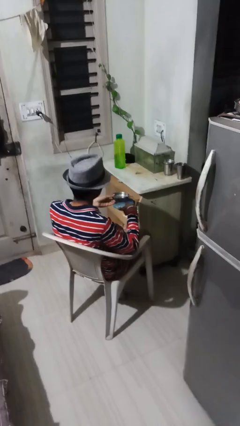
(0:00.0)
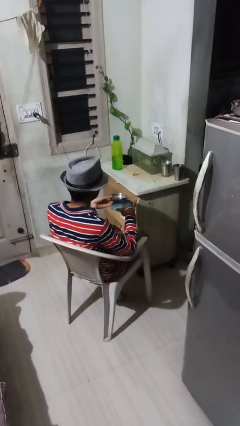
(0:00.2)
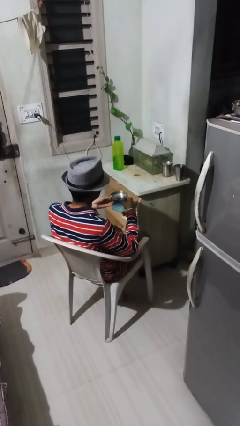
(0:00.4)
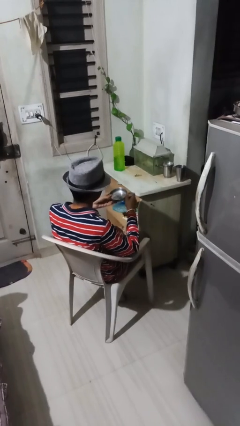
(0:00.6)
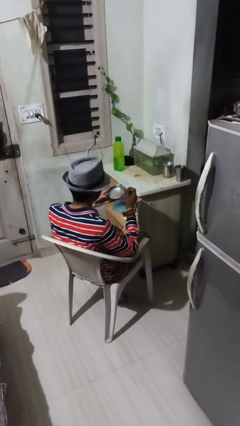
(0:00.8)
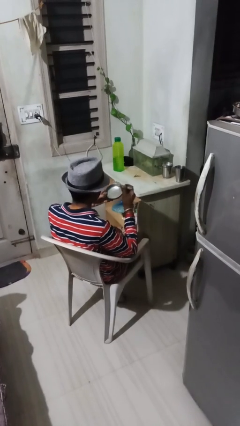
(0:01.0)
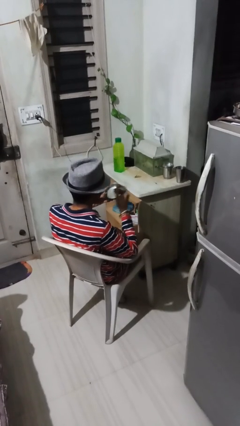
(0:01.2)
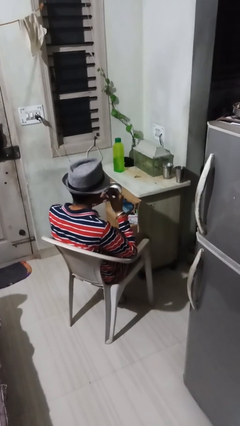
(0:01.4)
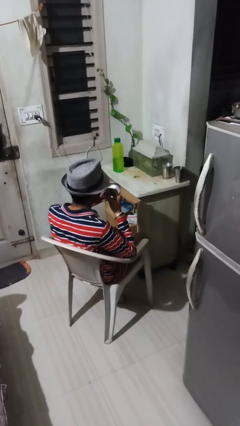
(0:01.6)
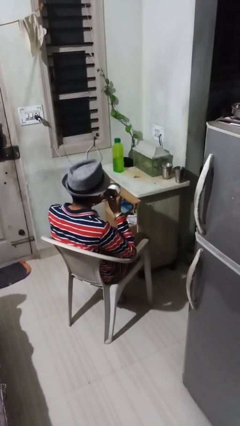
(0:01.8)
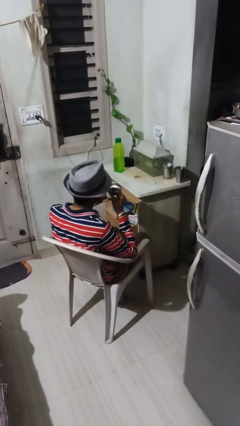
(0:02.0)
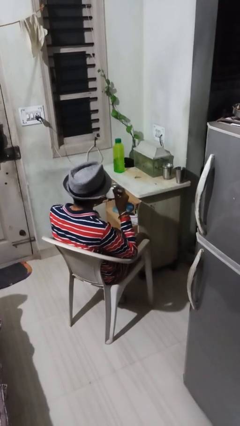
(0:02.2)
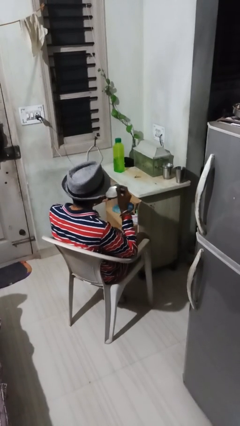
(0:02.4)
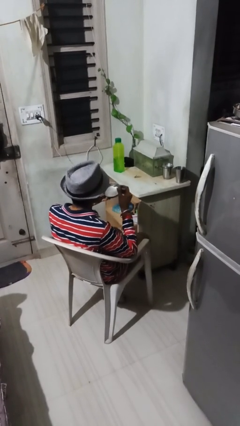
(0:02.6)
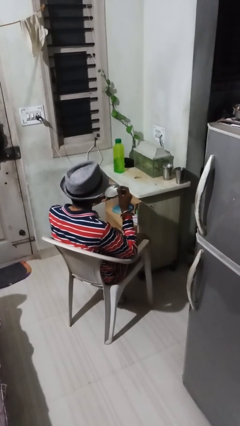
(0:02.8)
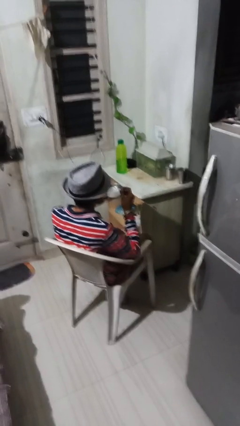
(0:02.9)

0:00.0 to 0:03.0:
person eats with utensil

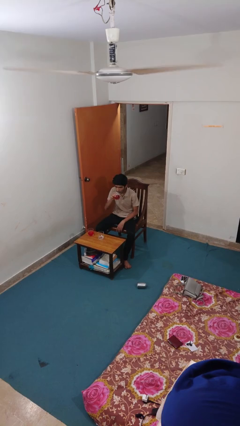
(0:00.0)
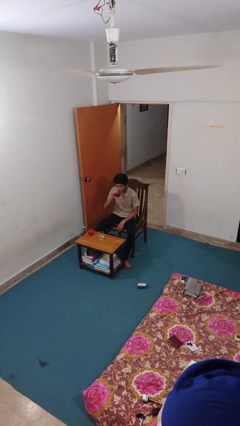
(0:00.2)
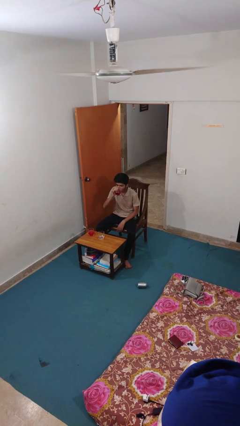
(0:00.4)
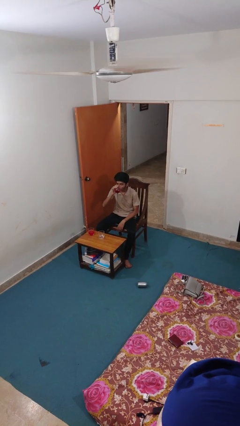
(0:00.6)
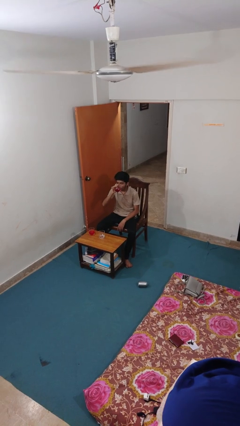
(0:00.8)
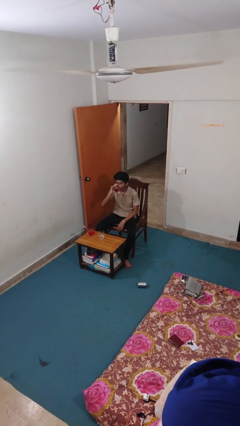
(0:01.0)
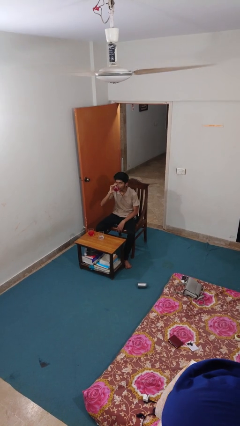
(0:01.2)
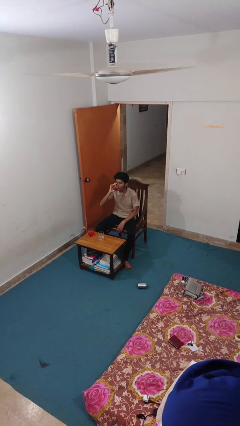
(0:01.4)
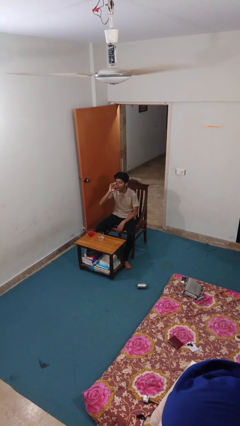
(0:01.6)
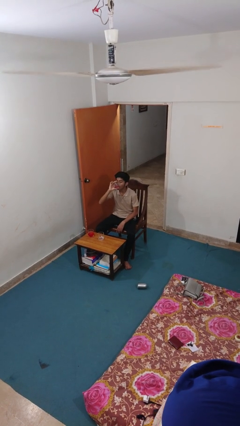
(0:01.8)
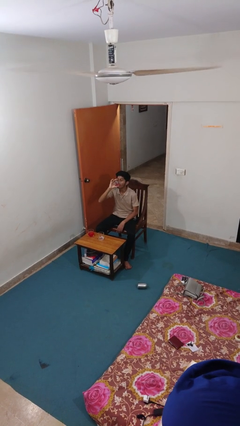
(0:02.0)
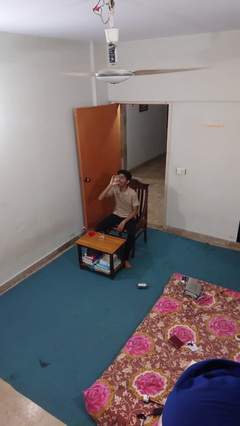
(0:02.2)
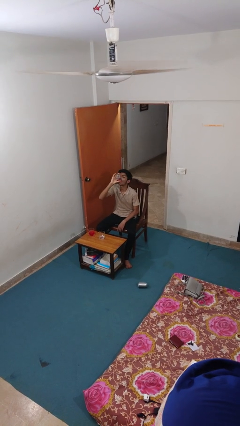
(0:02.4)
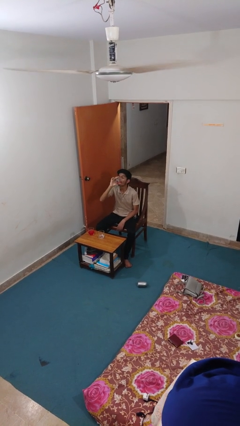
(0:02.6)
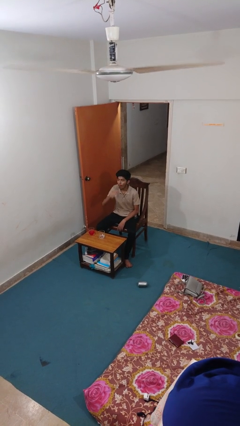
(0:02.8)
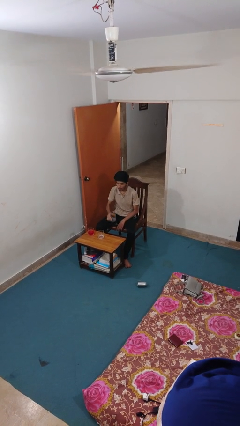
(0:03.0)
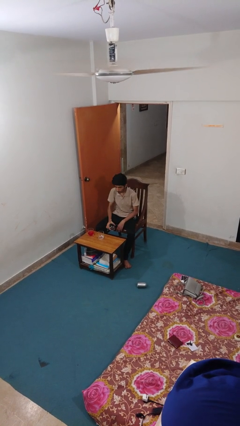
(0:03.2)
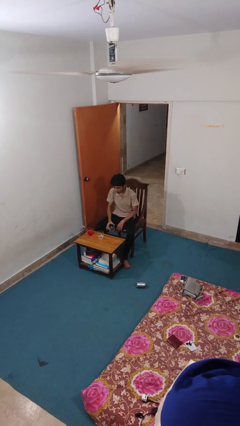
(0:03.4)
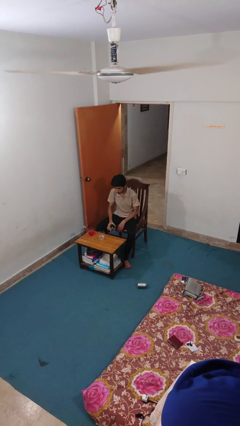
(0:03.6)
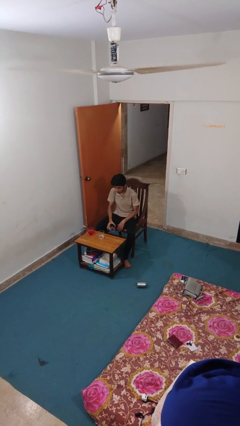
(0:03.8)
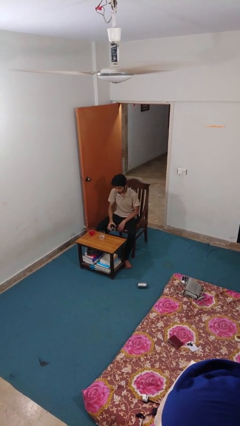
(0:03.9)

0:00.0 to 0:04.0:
person drinks from shotglass

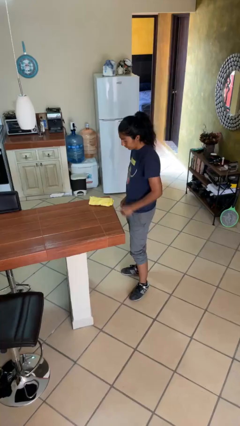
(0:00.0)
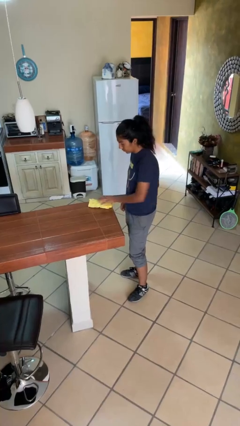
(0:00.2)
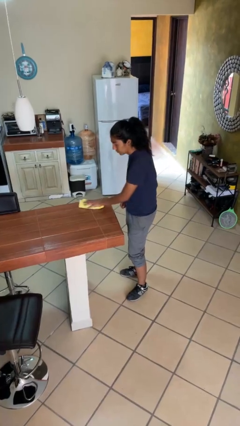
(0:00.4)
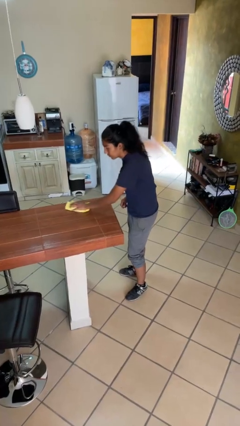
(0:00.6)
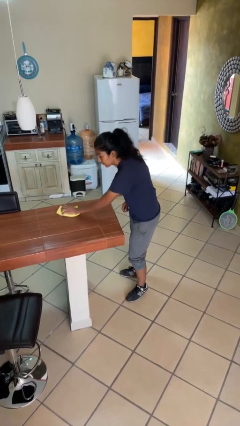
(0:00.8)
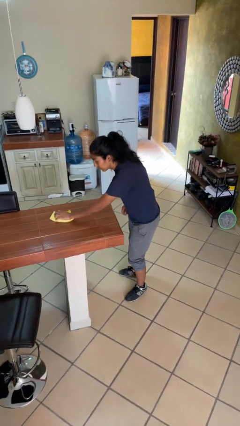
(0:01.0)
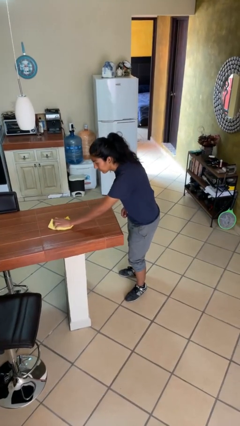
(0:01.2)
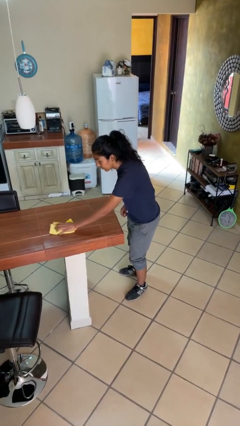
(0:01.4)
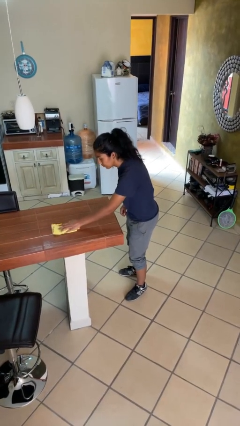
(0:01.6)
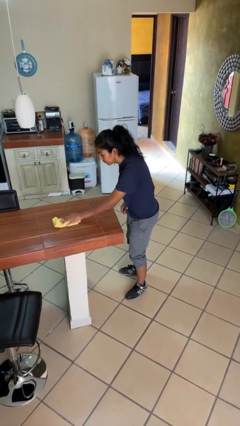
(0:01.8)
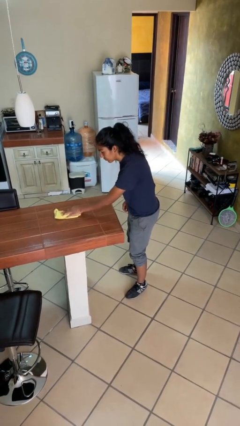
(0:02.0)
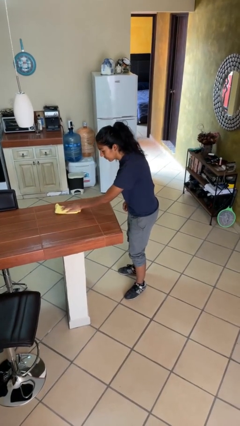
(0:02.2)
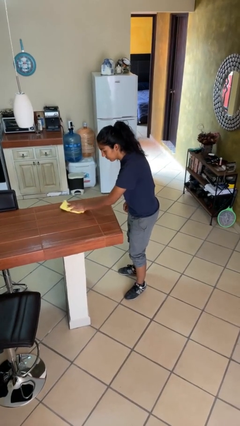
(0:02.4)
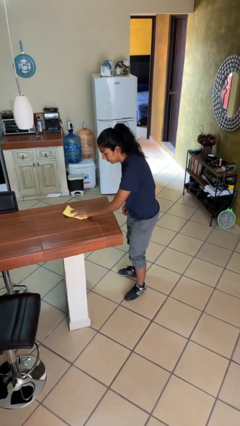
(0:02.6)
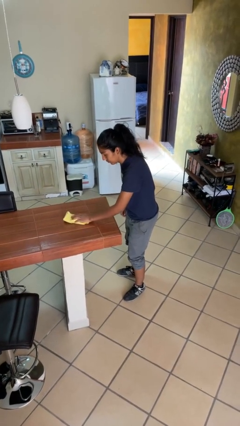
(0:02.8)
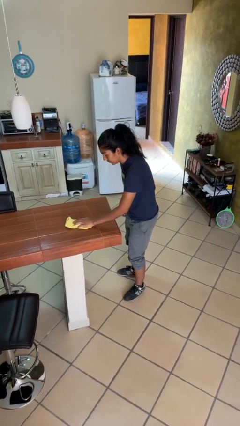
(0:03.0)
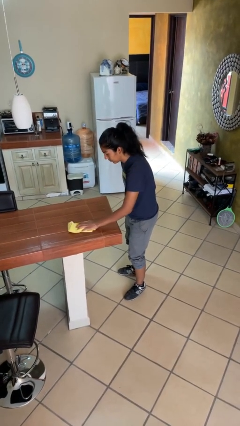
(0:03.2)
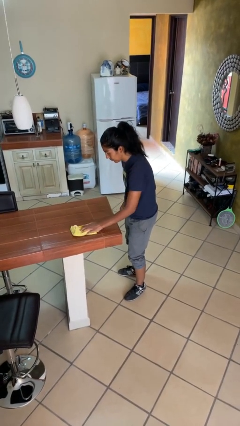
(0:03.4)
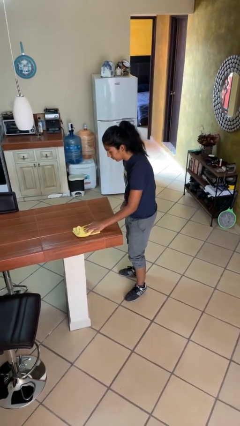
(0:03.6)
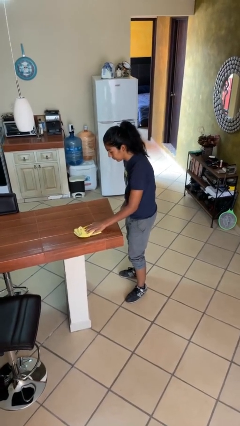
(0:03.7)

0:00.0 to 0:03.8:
person cleans table with rag

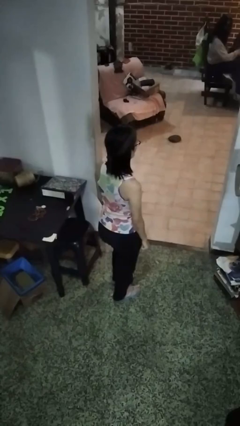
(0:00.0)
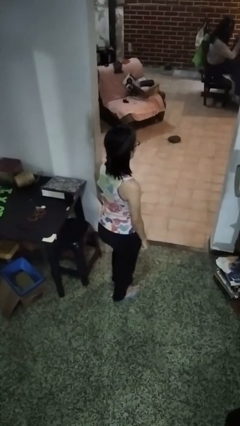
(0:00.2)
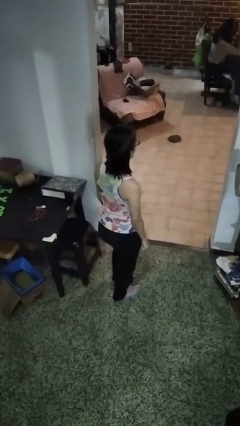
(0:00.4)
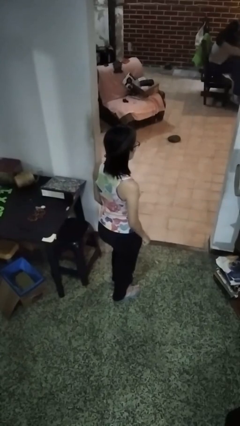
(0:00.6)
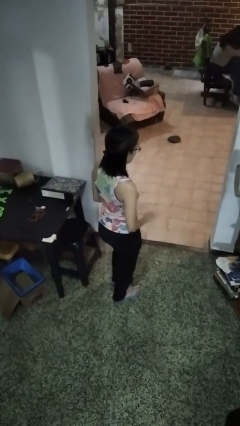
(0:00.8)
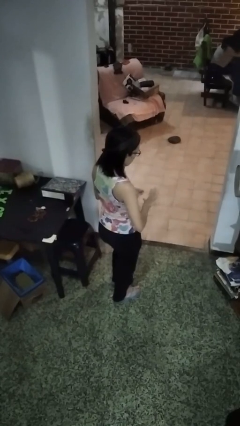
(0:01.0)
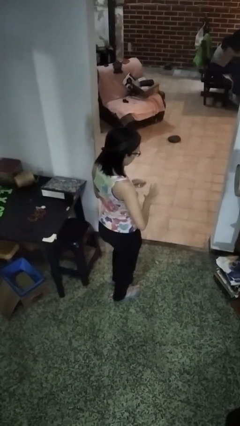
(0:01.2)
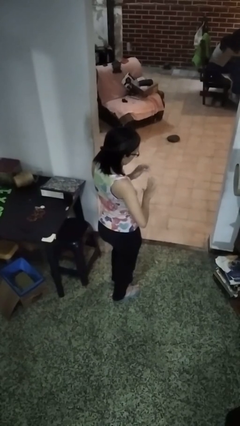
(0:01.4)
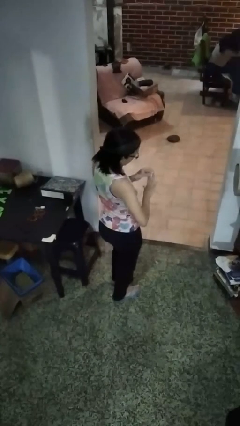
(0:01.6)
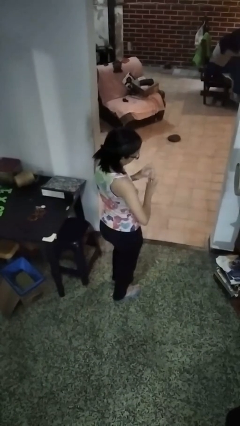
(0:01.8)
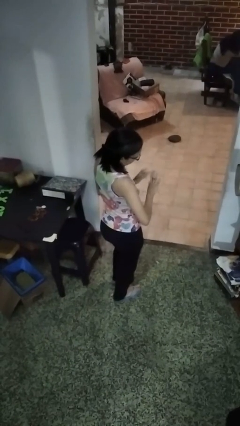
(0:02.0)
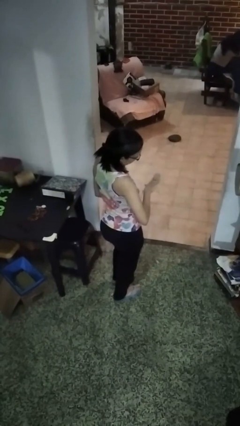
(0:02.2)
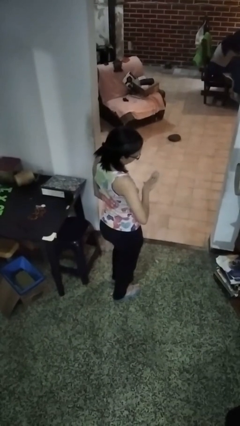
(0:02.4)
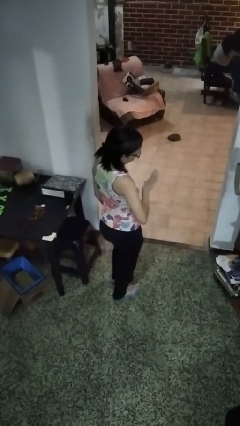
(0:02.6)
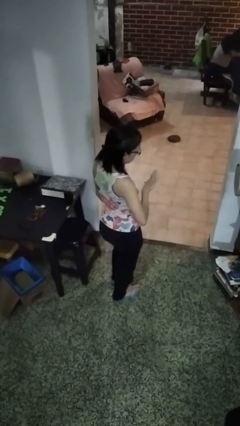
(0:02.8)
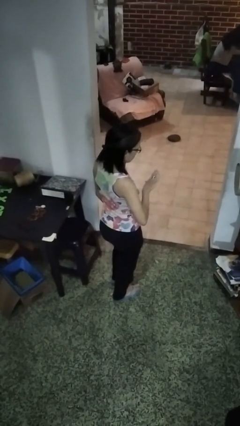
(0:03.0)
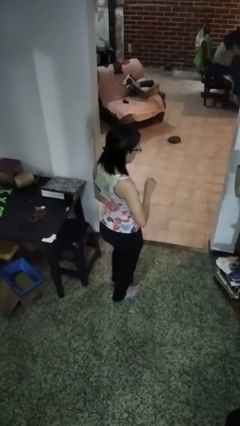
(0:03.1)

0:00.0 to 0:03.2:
person puts on ring

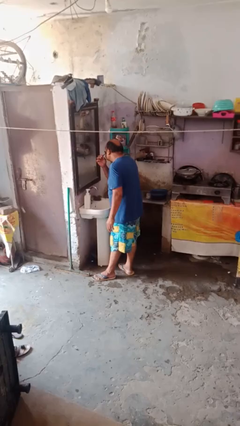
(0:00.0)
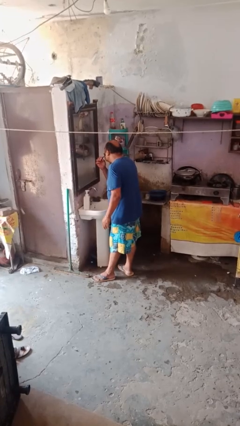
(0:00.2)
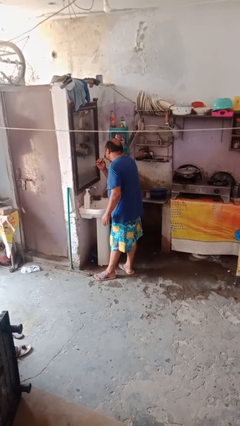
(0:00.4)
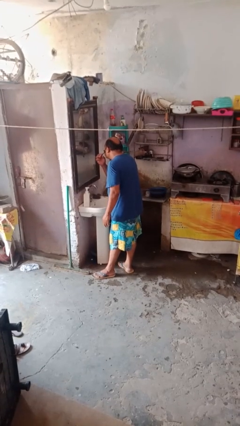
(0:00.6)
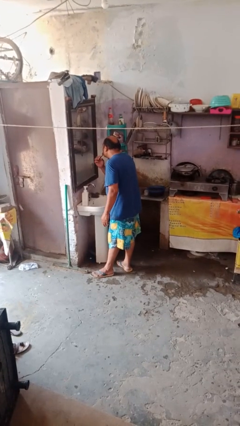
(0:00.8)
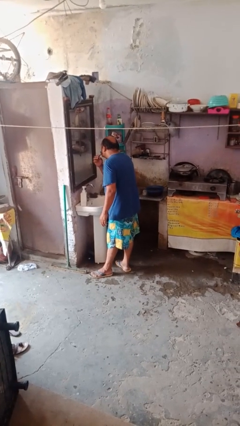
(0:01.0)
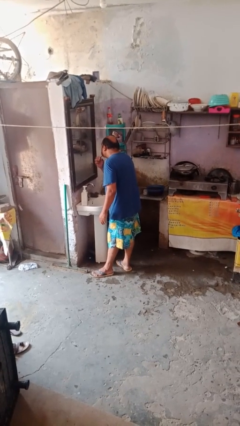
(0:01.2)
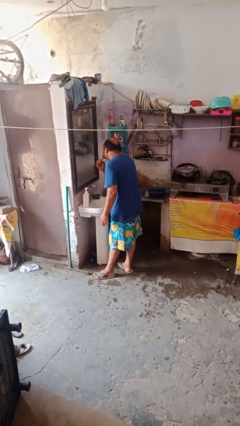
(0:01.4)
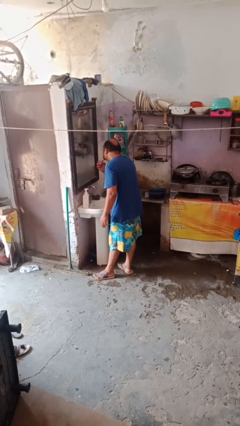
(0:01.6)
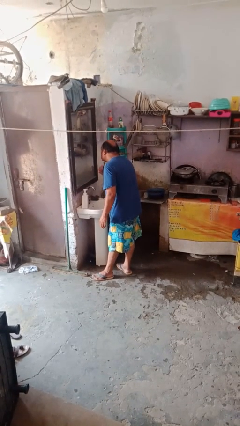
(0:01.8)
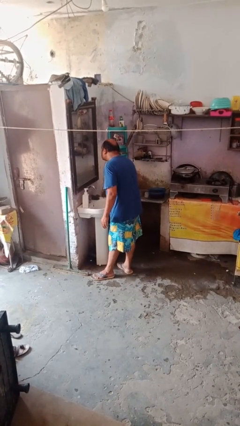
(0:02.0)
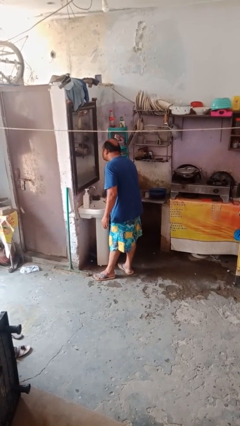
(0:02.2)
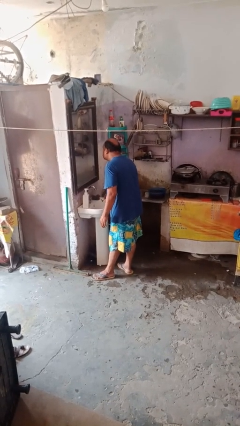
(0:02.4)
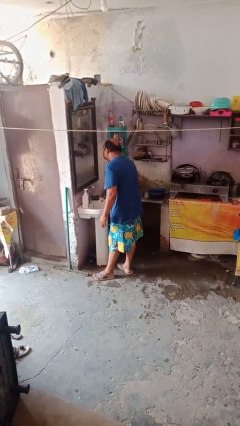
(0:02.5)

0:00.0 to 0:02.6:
person shaves face

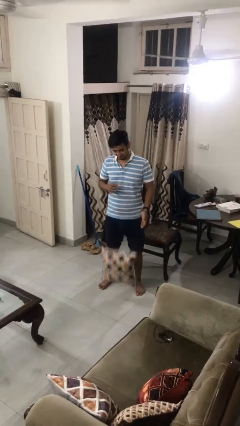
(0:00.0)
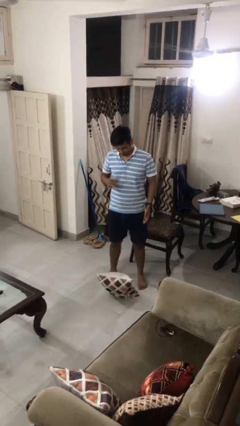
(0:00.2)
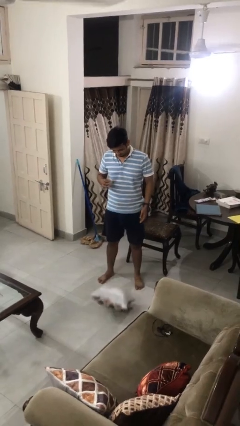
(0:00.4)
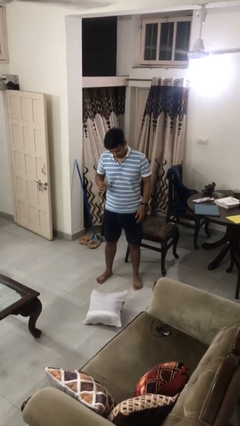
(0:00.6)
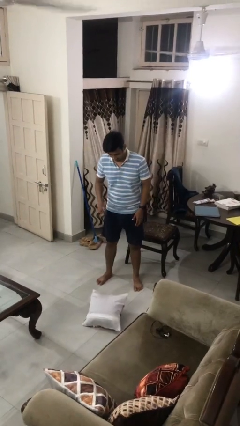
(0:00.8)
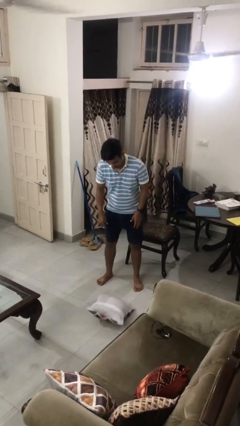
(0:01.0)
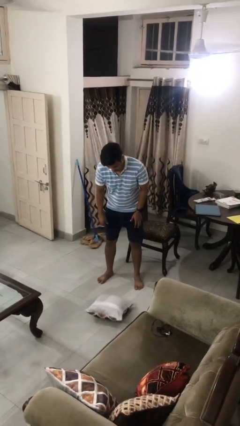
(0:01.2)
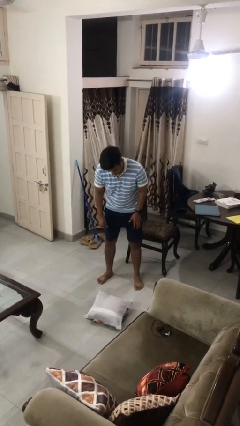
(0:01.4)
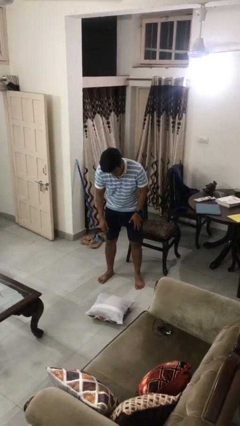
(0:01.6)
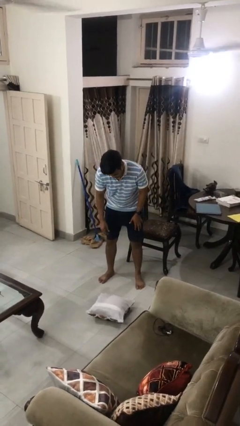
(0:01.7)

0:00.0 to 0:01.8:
person drops object
